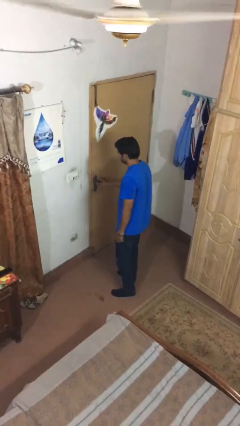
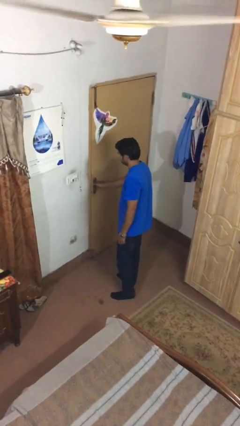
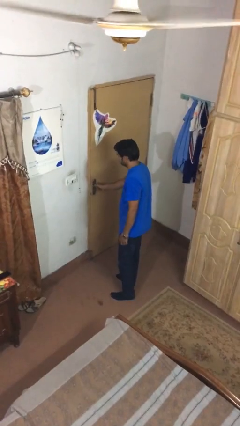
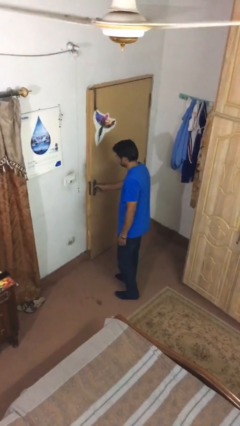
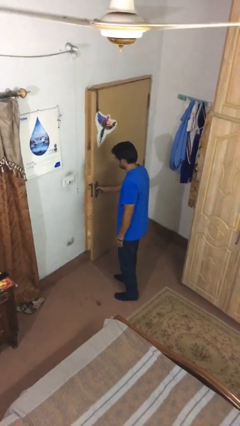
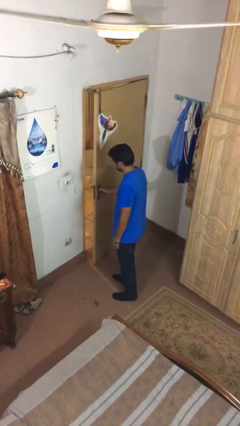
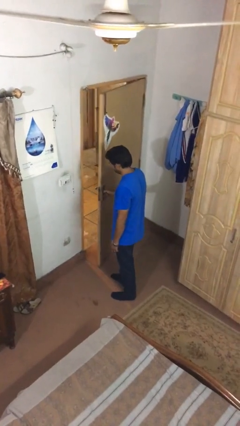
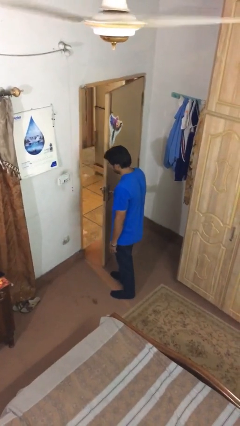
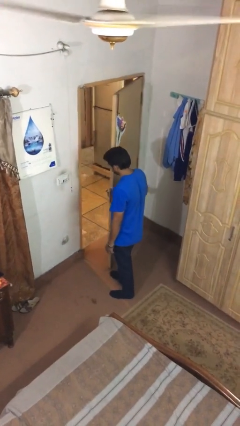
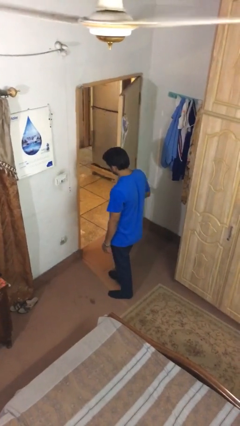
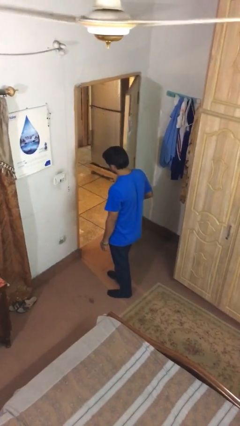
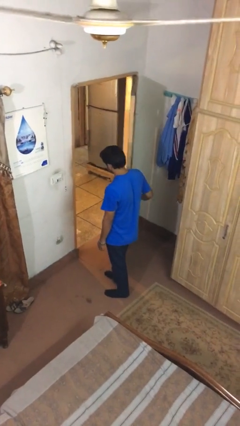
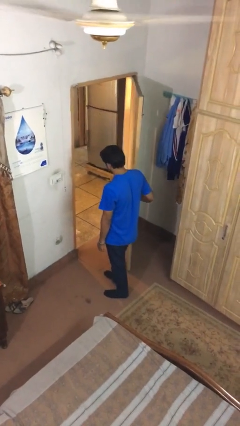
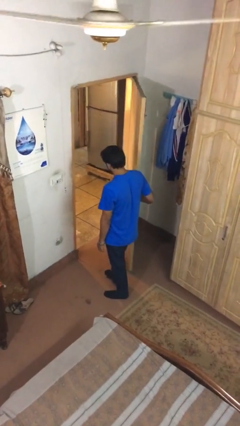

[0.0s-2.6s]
person opens facility door

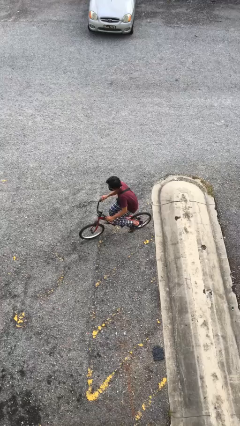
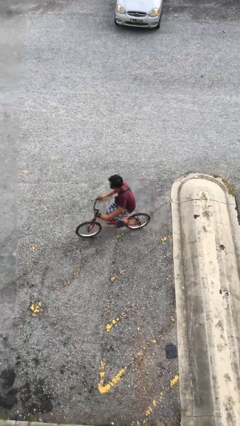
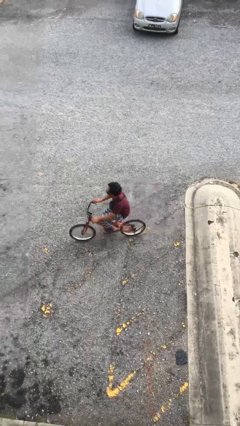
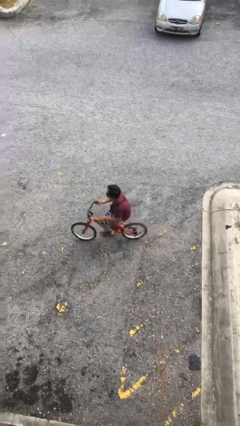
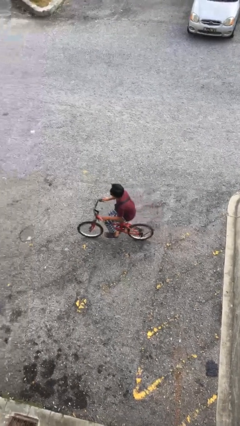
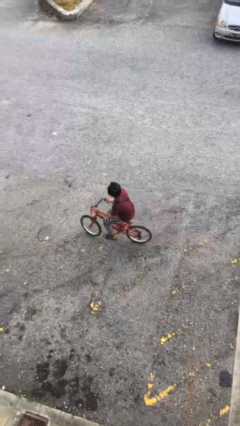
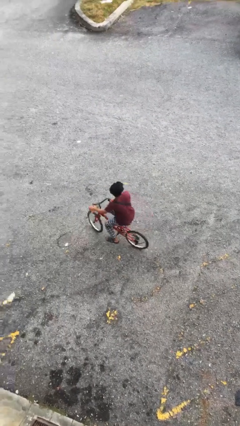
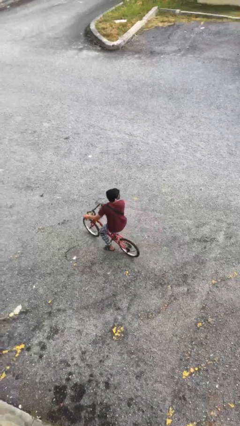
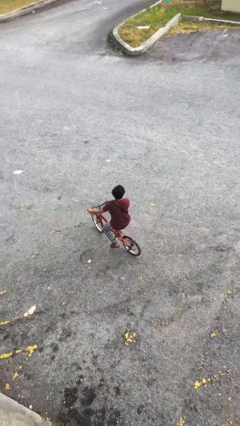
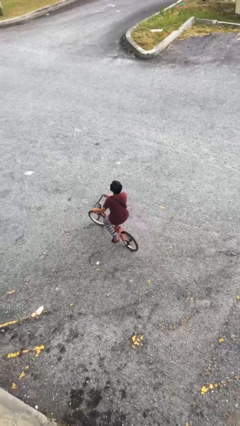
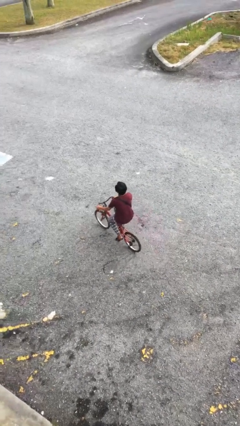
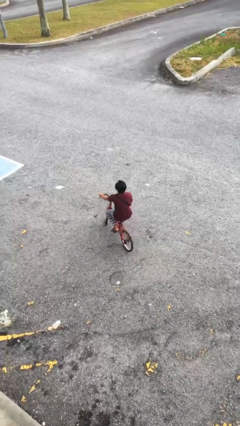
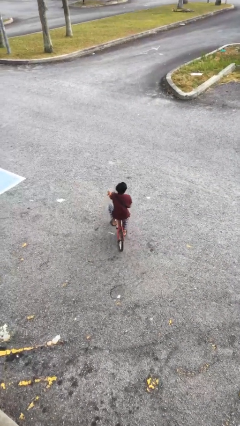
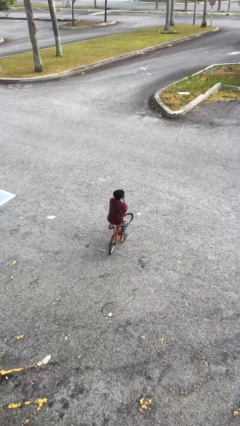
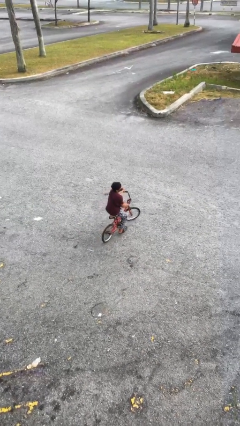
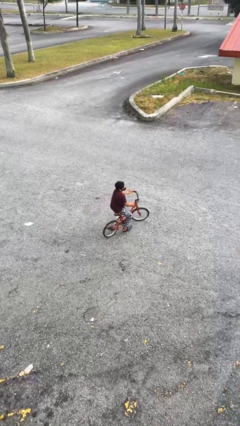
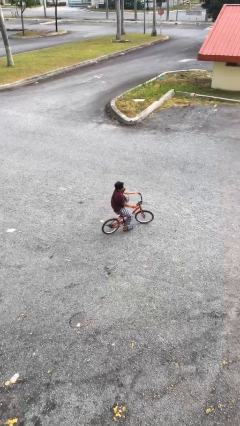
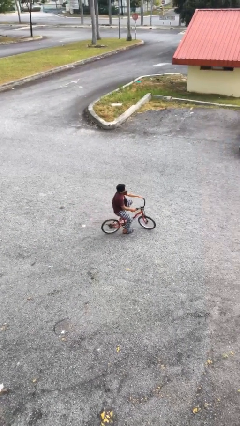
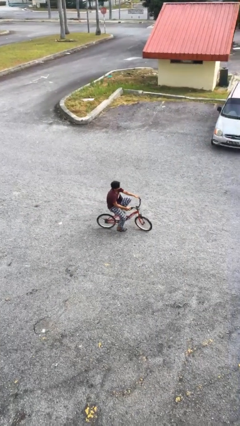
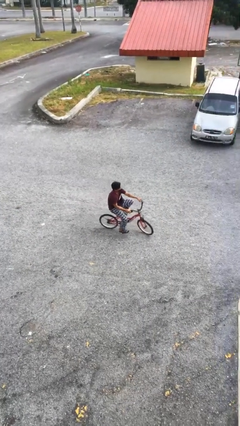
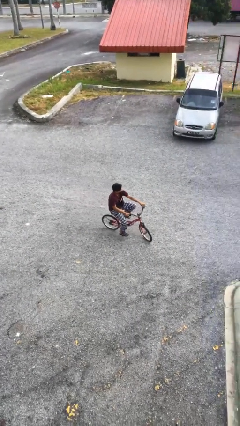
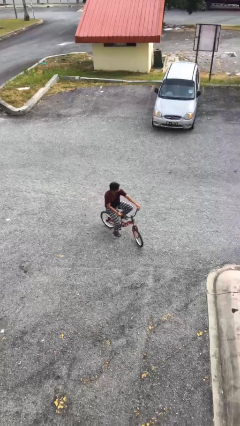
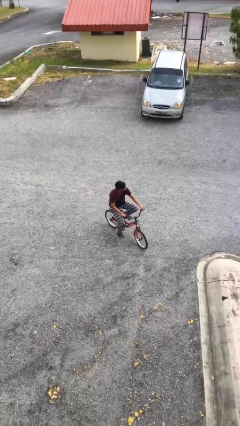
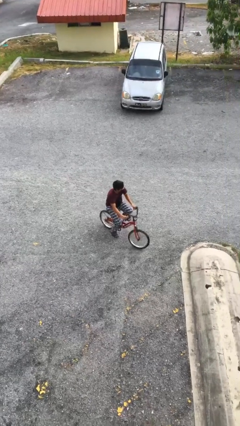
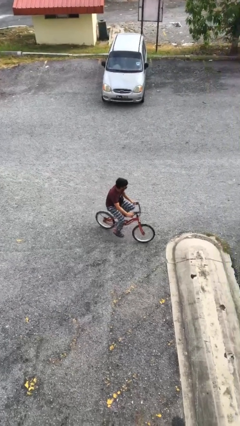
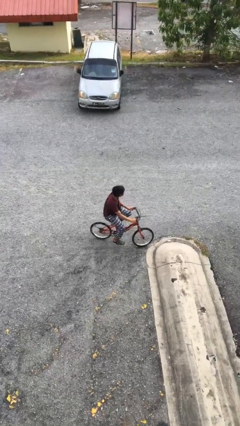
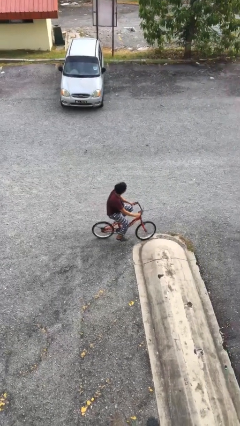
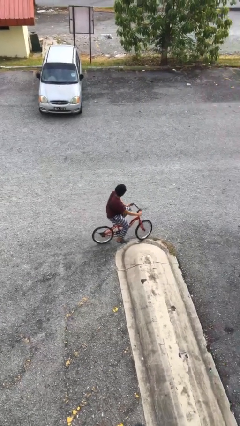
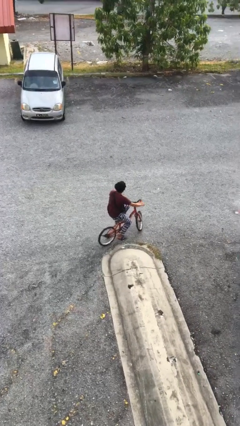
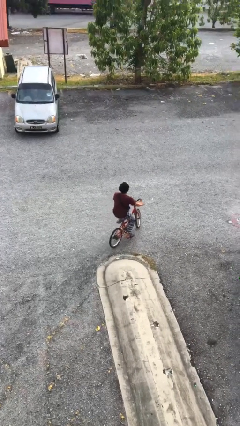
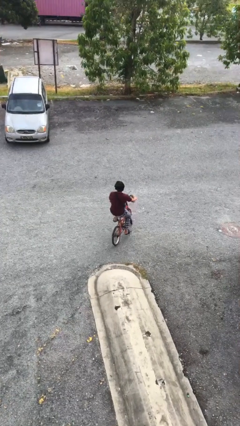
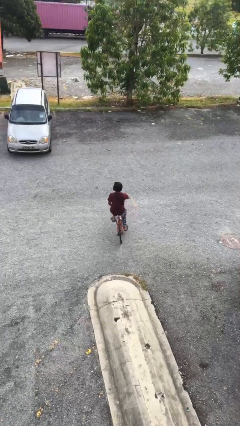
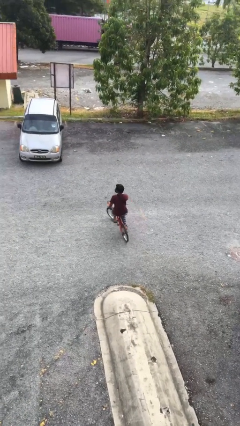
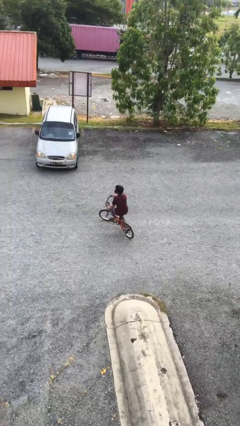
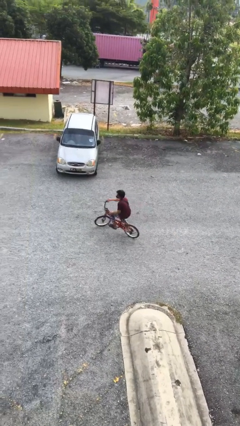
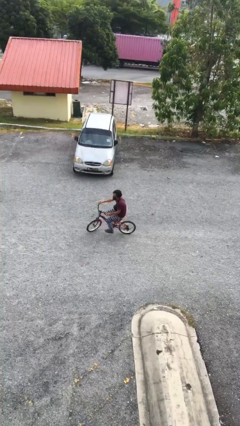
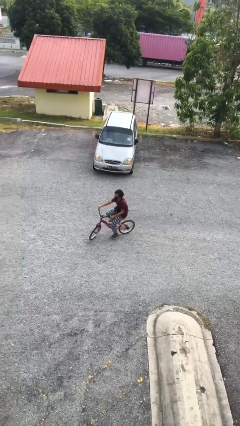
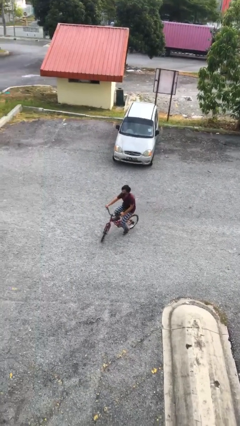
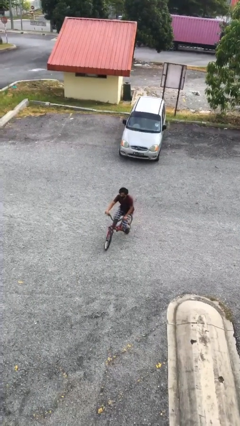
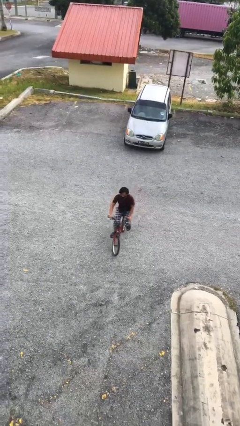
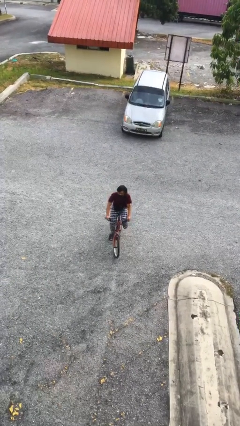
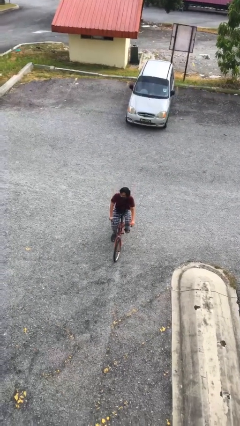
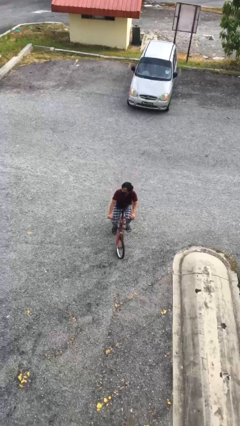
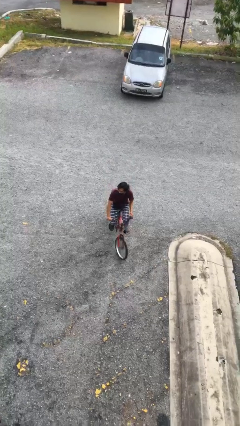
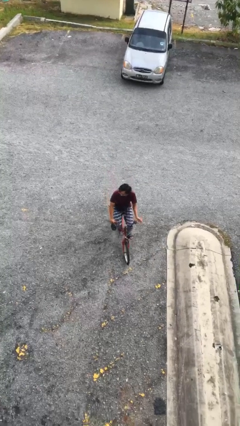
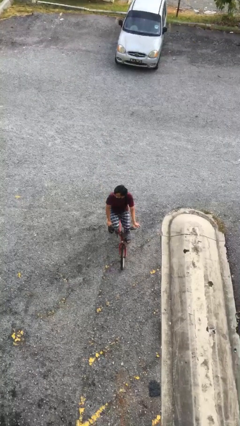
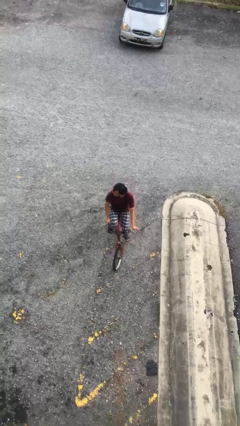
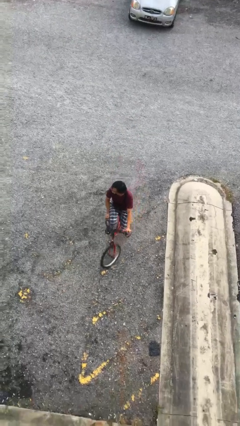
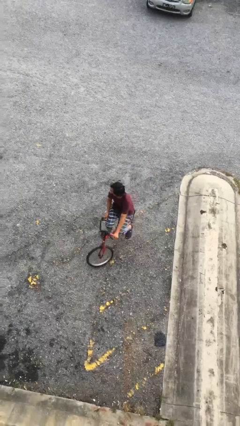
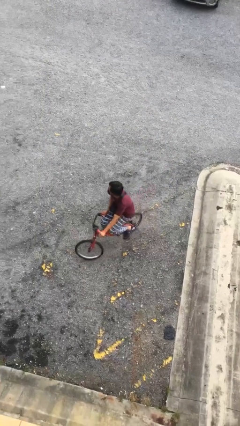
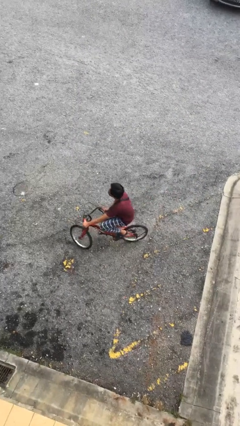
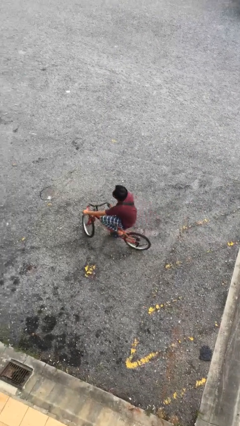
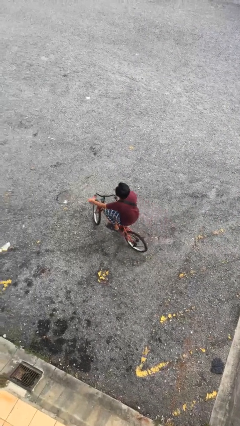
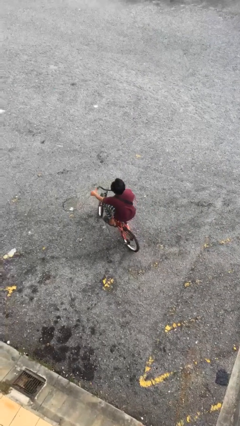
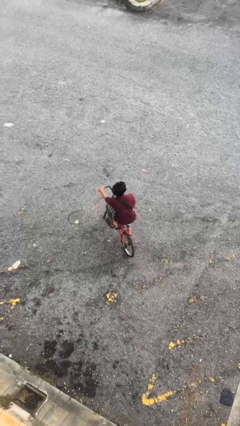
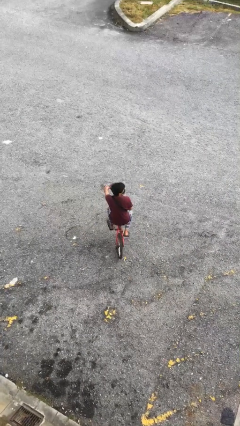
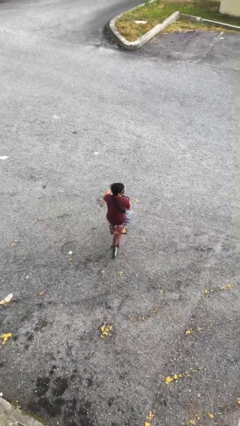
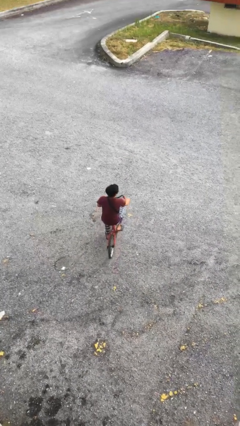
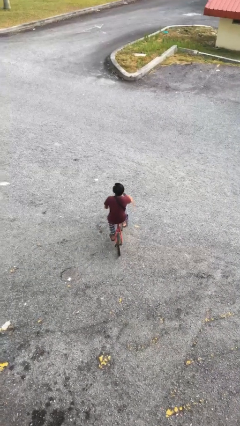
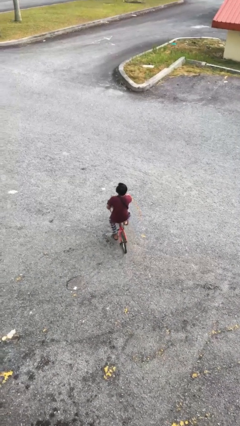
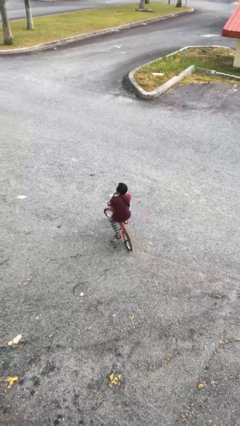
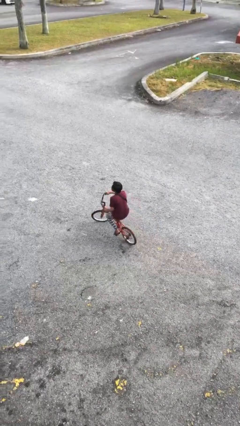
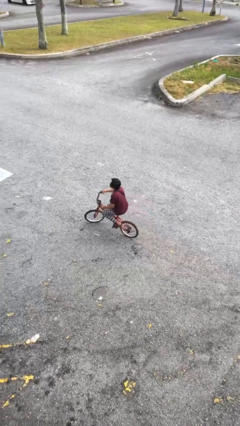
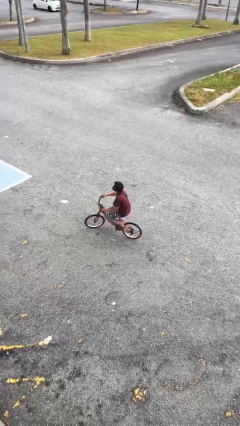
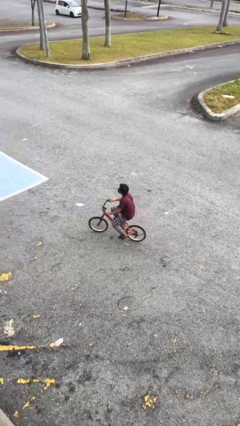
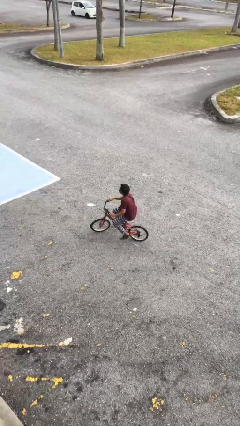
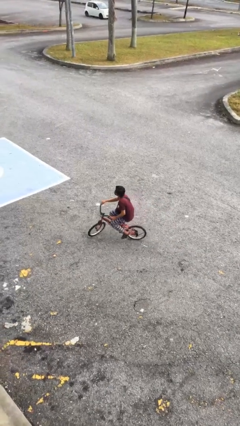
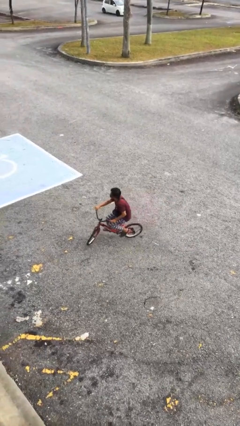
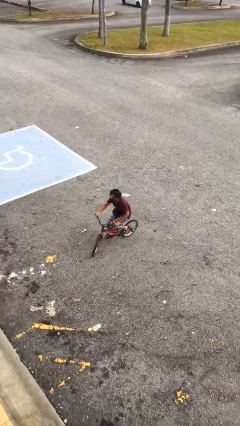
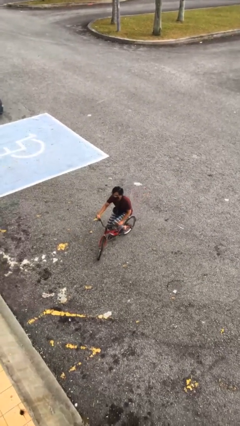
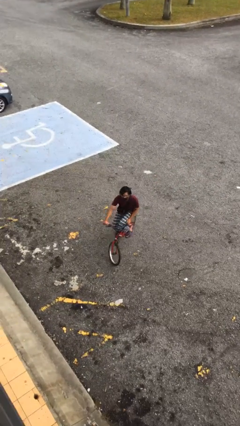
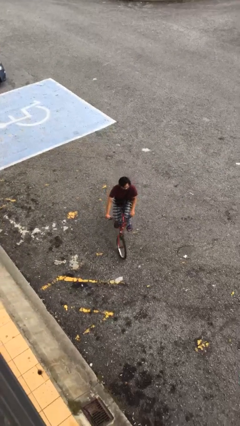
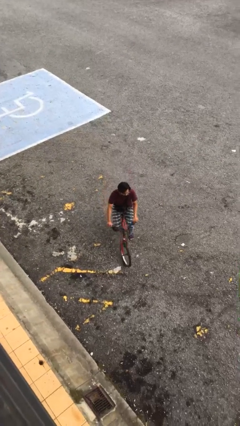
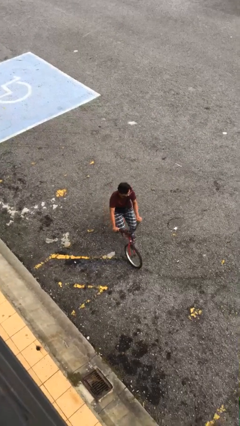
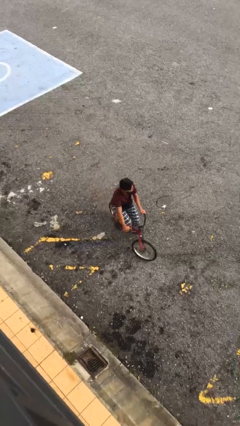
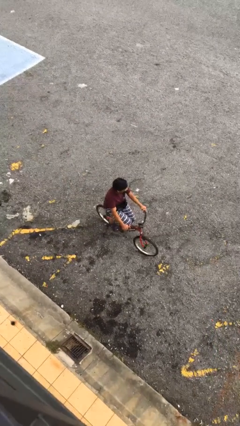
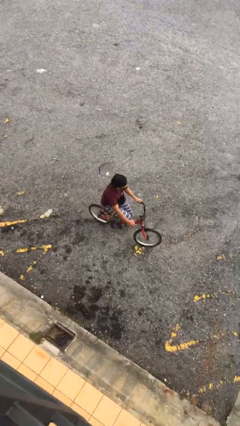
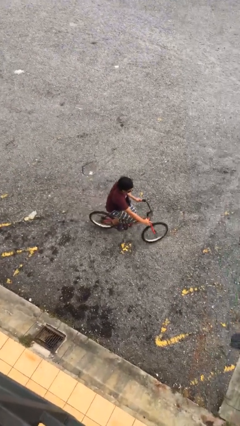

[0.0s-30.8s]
person rides bicycle

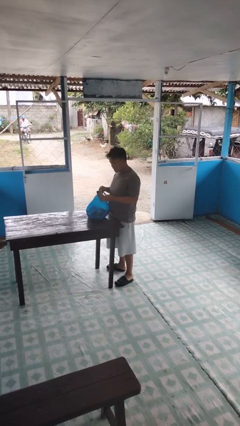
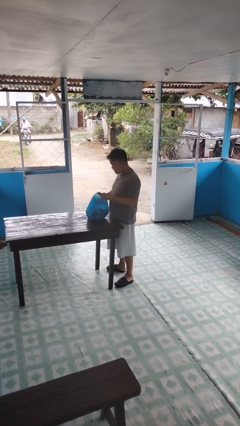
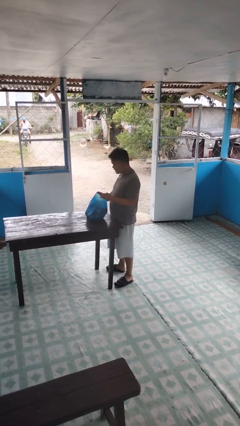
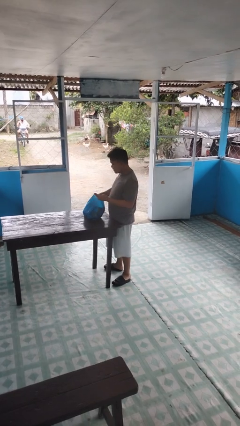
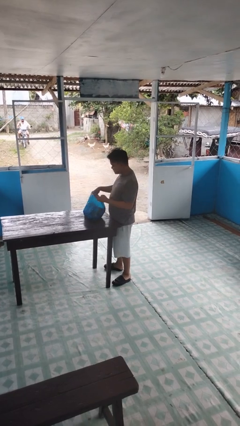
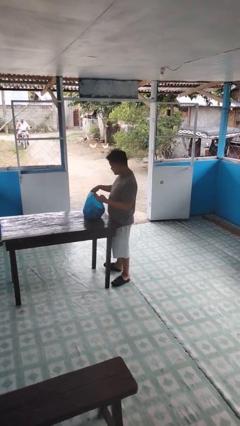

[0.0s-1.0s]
person puts object into bag
